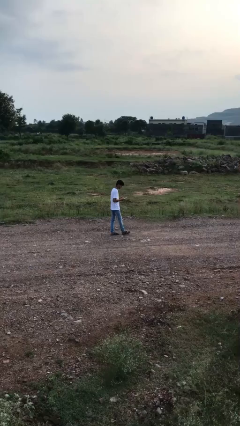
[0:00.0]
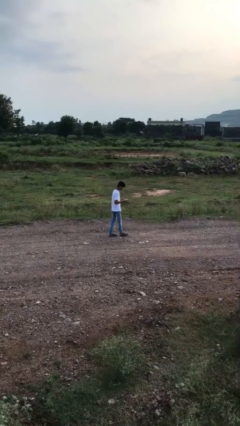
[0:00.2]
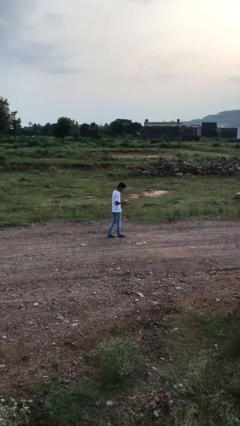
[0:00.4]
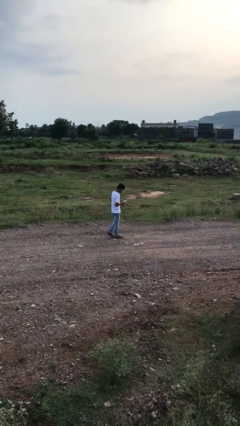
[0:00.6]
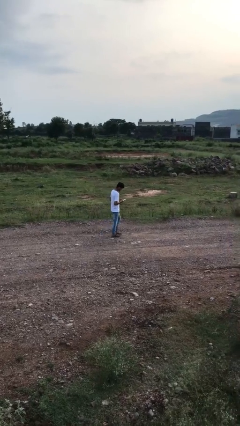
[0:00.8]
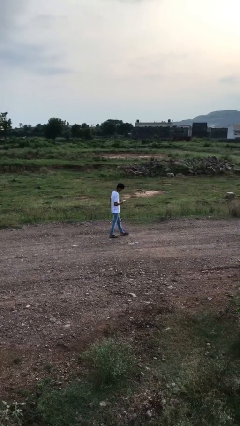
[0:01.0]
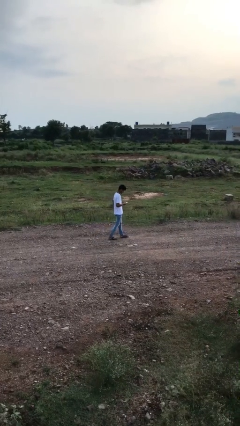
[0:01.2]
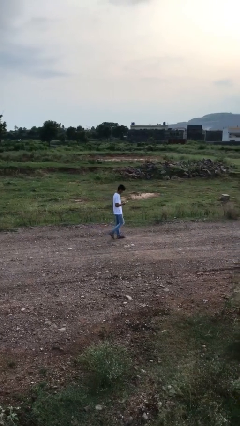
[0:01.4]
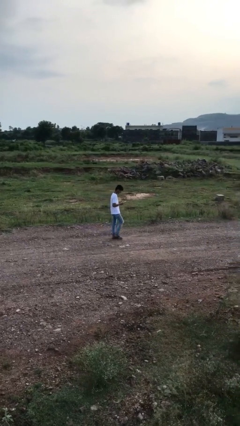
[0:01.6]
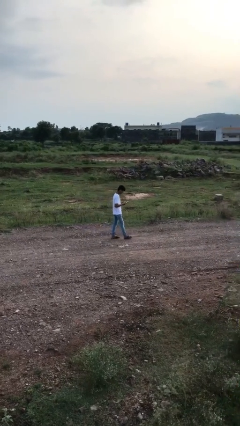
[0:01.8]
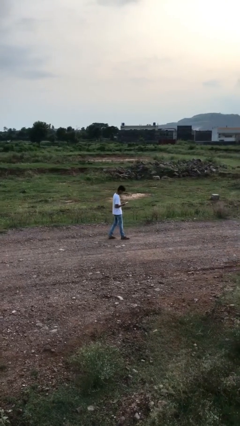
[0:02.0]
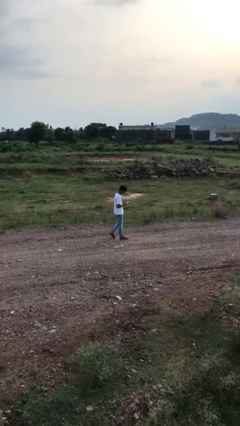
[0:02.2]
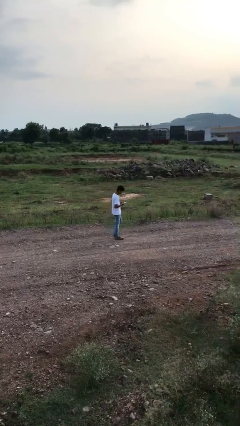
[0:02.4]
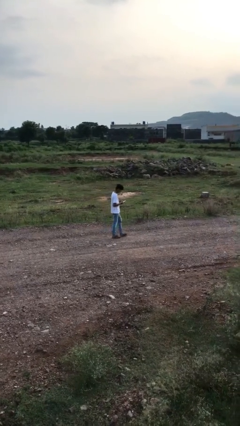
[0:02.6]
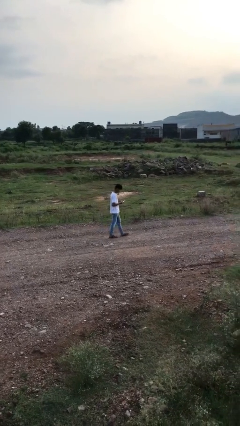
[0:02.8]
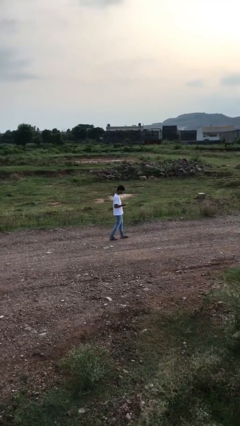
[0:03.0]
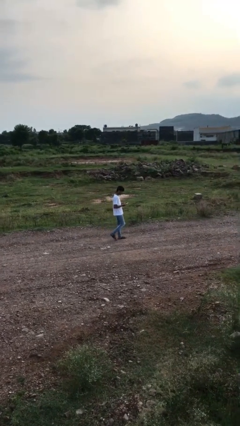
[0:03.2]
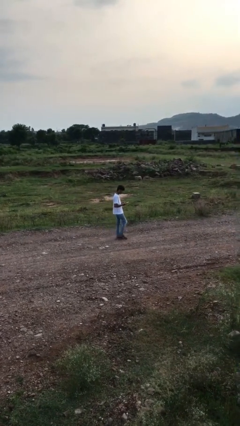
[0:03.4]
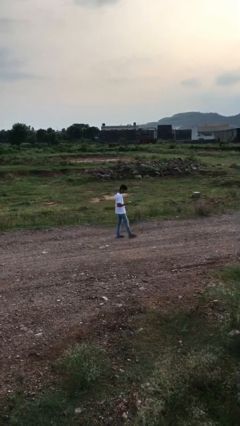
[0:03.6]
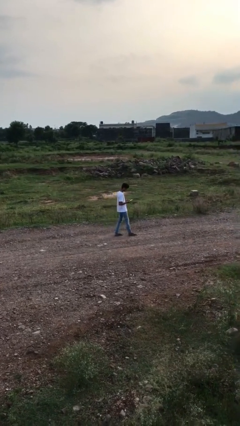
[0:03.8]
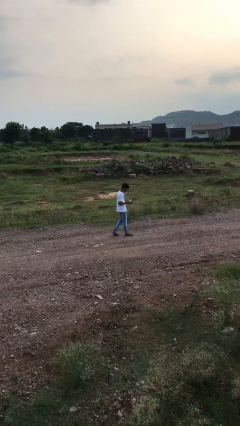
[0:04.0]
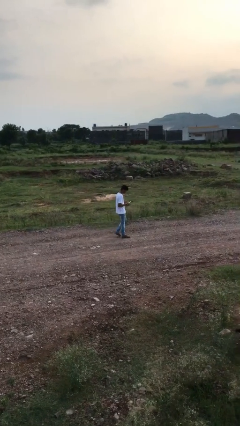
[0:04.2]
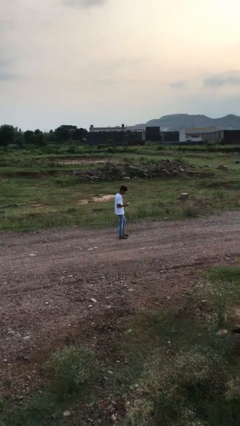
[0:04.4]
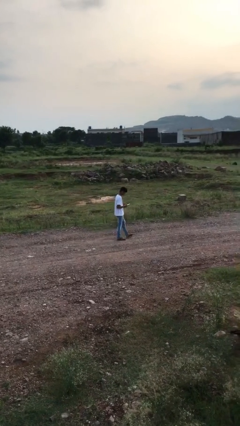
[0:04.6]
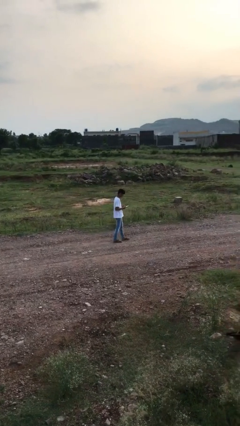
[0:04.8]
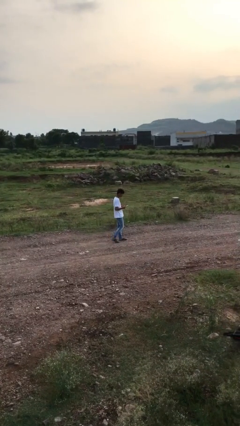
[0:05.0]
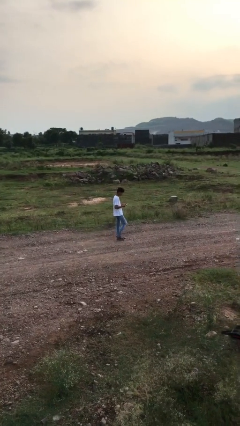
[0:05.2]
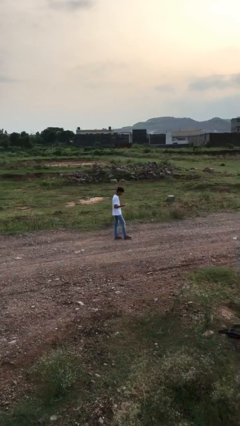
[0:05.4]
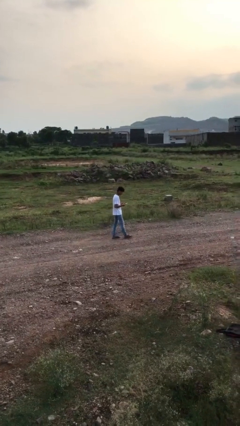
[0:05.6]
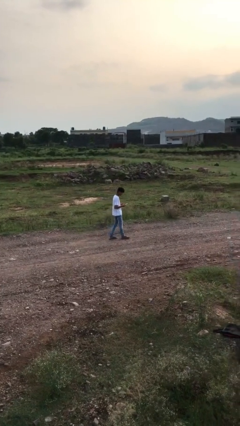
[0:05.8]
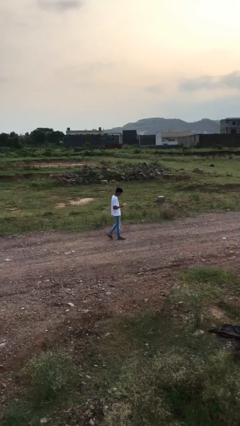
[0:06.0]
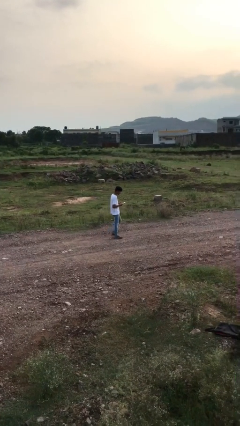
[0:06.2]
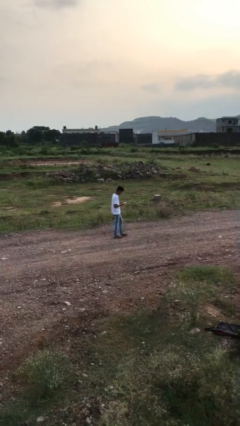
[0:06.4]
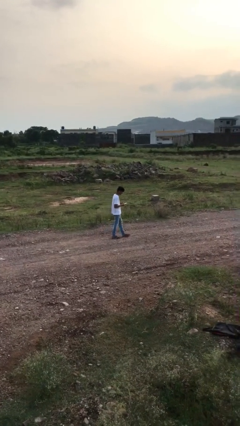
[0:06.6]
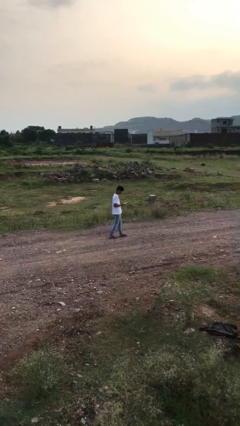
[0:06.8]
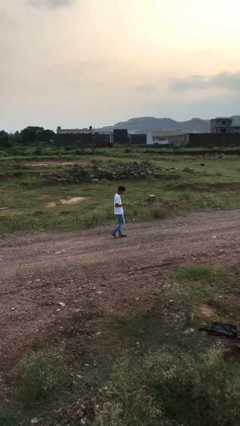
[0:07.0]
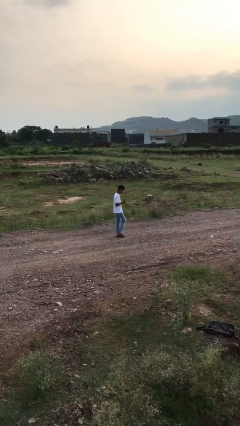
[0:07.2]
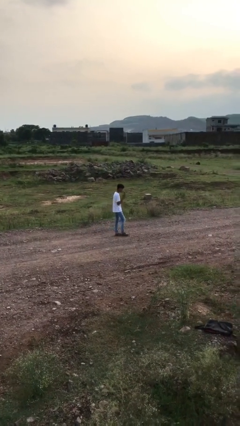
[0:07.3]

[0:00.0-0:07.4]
person texts on phone

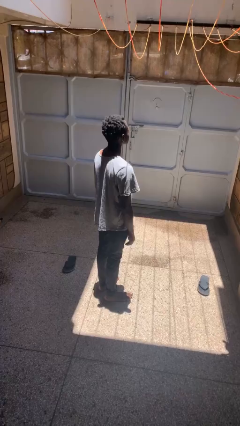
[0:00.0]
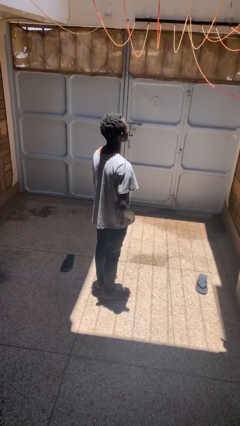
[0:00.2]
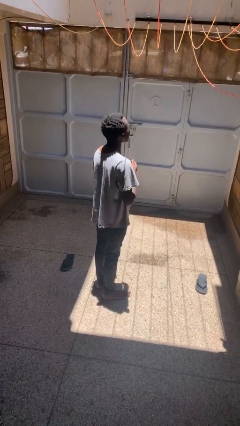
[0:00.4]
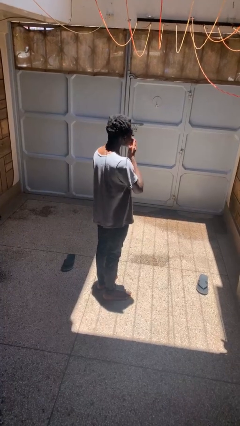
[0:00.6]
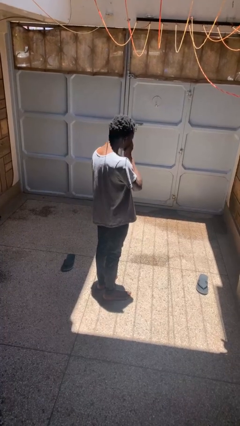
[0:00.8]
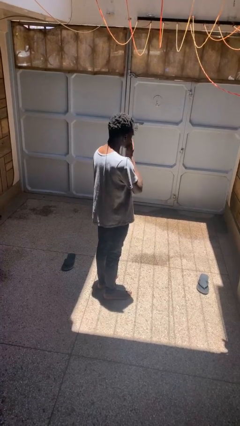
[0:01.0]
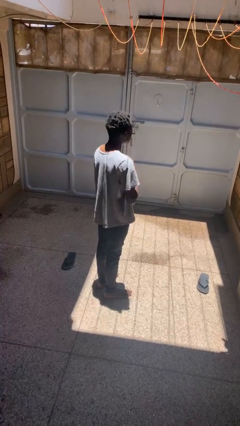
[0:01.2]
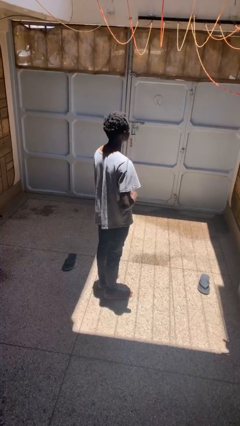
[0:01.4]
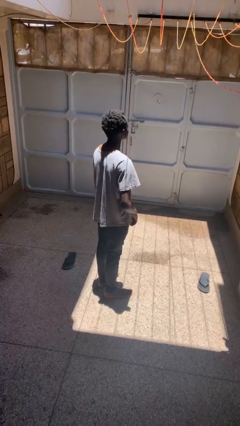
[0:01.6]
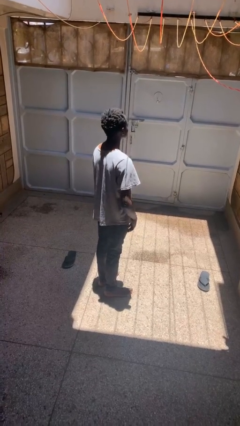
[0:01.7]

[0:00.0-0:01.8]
person sneezes into hand

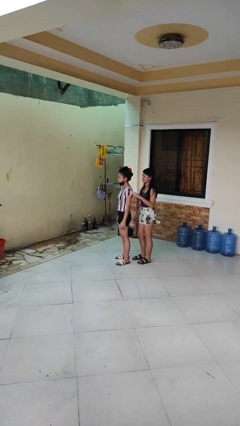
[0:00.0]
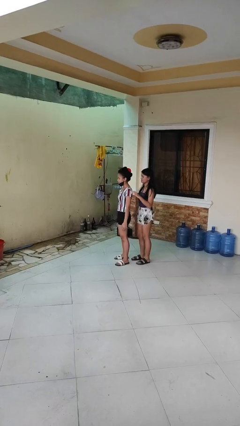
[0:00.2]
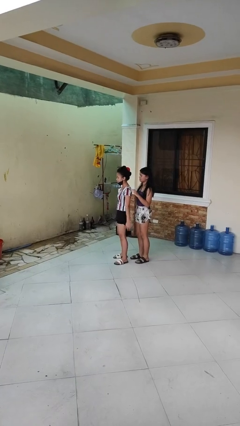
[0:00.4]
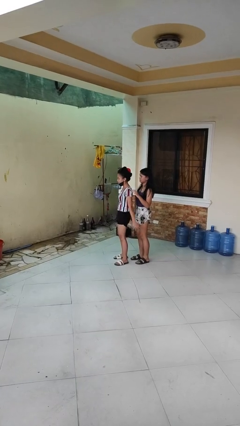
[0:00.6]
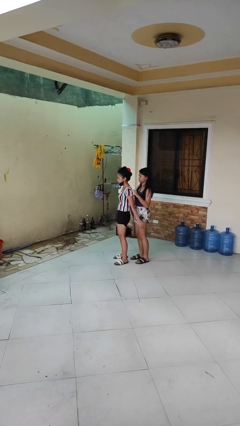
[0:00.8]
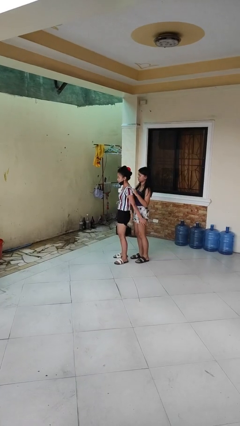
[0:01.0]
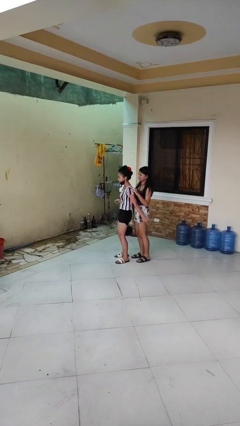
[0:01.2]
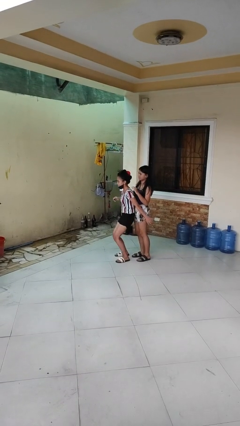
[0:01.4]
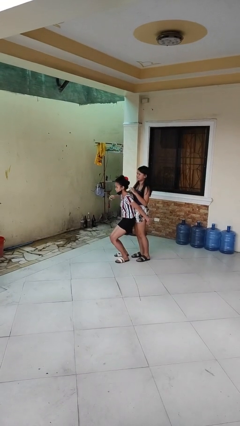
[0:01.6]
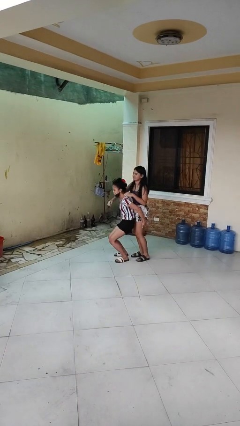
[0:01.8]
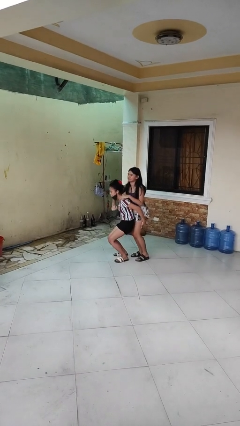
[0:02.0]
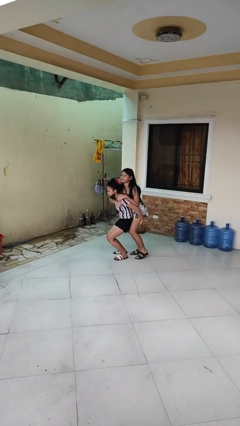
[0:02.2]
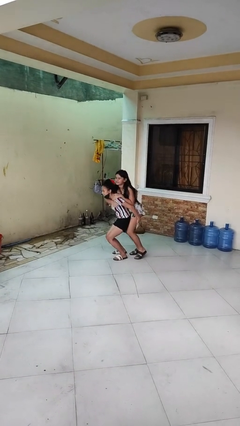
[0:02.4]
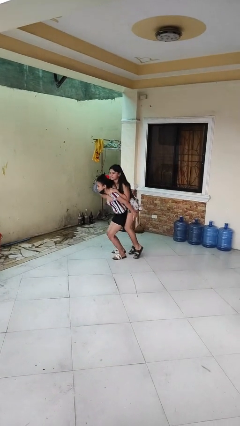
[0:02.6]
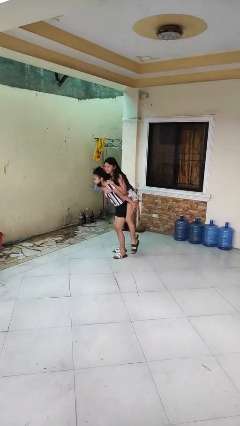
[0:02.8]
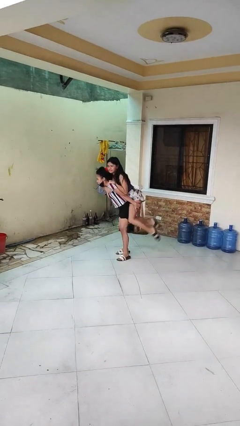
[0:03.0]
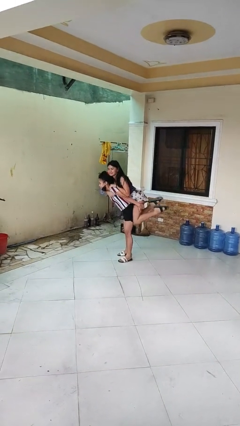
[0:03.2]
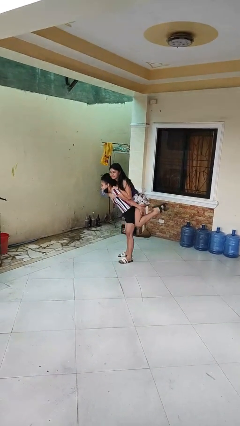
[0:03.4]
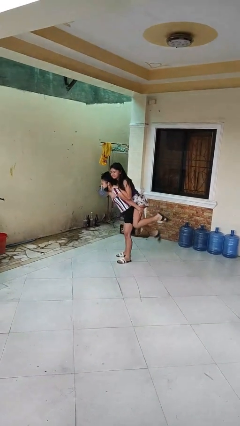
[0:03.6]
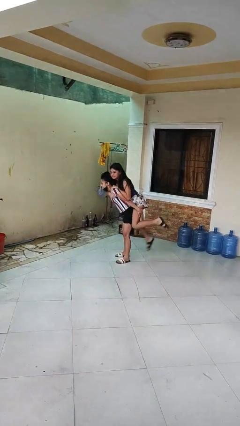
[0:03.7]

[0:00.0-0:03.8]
person carries person over shoulder

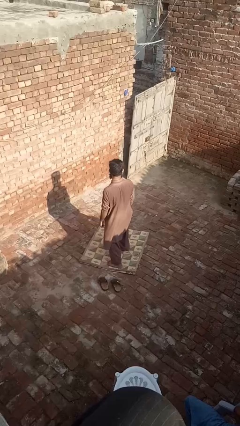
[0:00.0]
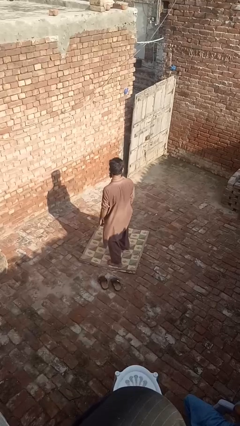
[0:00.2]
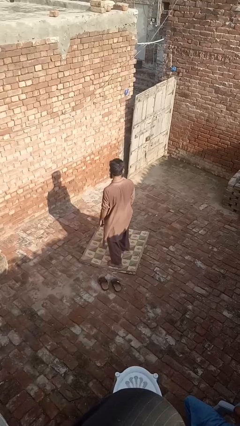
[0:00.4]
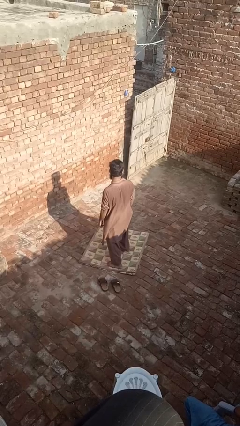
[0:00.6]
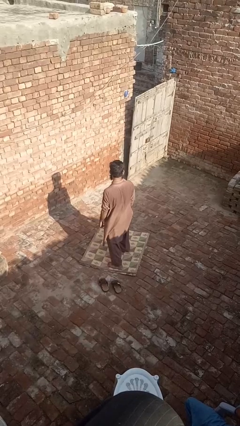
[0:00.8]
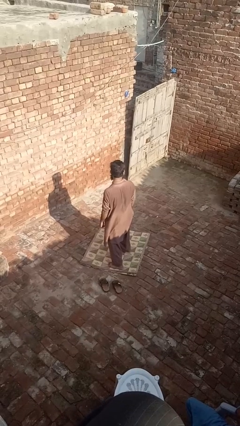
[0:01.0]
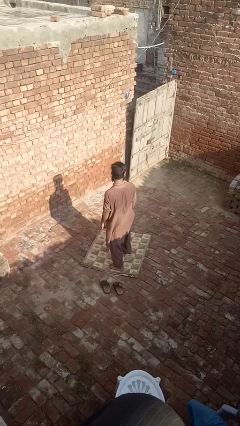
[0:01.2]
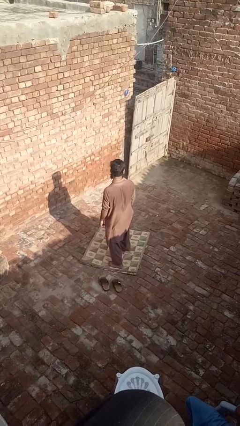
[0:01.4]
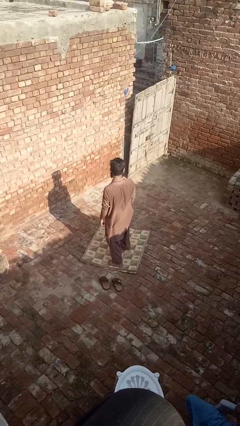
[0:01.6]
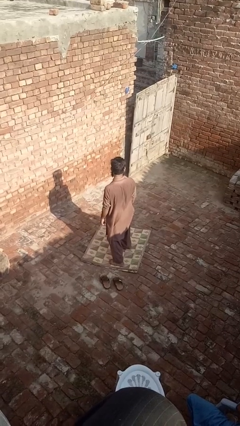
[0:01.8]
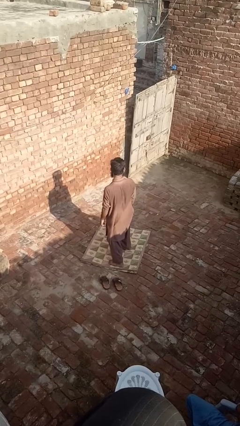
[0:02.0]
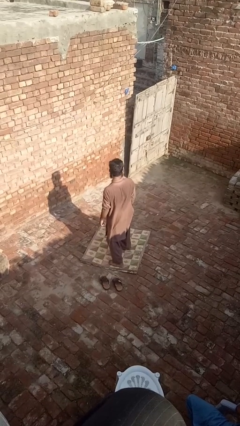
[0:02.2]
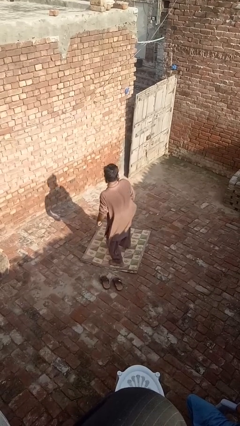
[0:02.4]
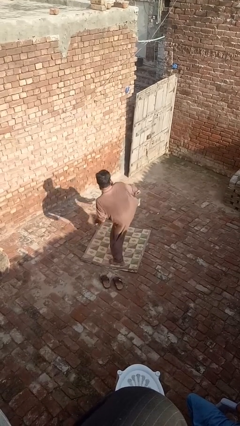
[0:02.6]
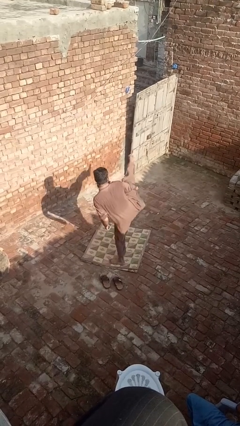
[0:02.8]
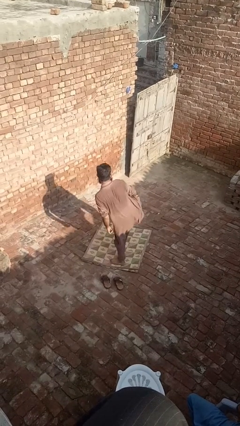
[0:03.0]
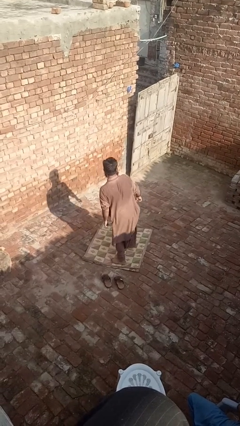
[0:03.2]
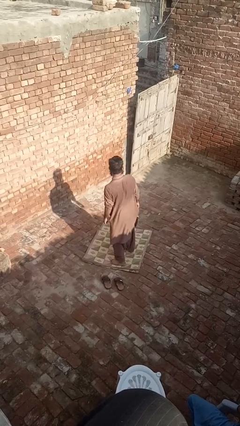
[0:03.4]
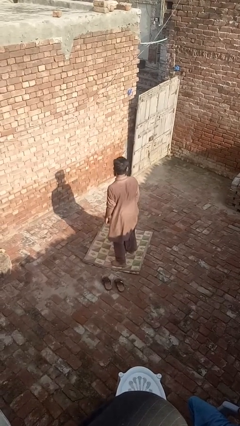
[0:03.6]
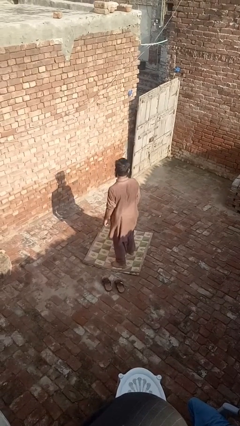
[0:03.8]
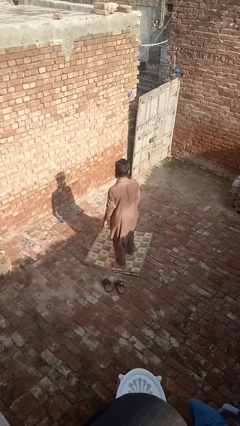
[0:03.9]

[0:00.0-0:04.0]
person karate kicks

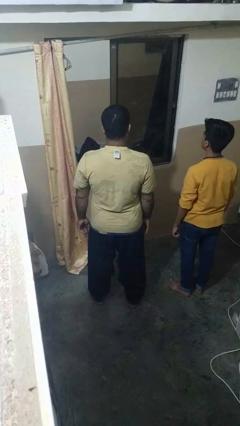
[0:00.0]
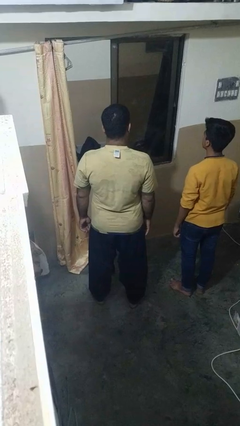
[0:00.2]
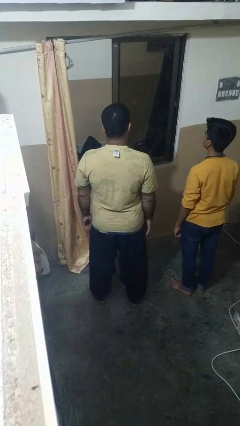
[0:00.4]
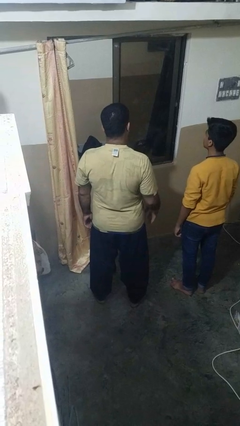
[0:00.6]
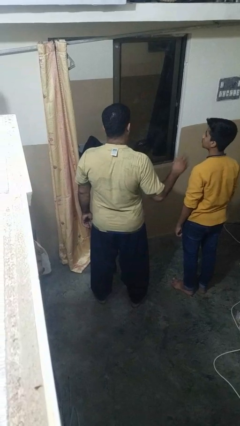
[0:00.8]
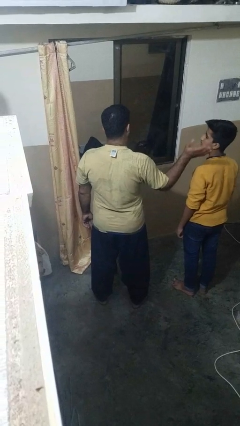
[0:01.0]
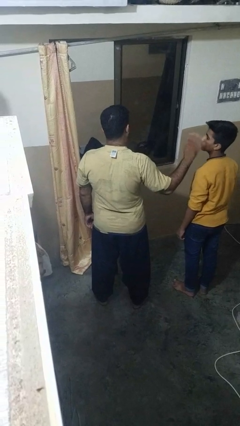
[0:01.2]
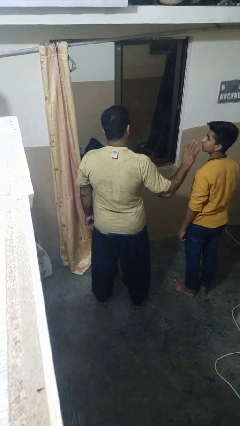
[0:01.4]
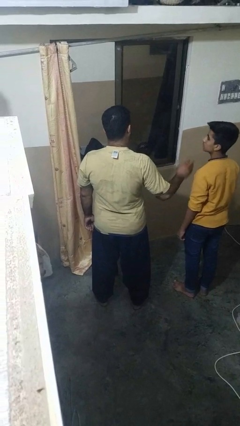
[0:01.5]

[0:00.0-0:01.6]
person waves at person
